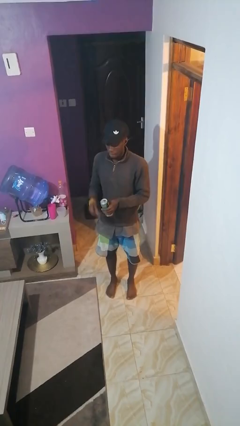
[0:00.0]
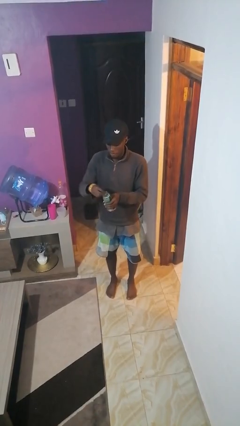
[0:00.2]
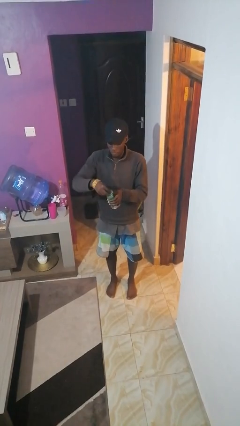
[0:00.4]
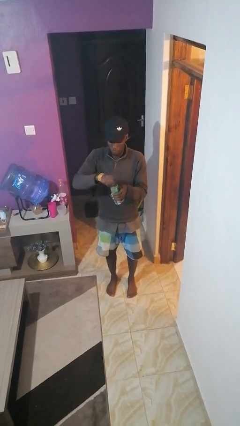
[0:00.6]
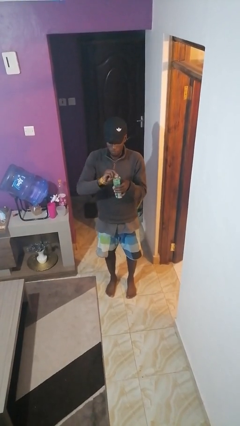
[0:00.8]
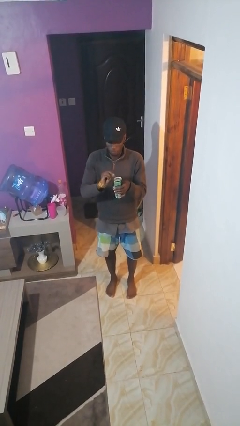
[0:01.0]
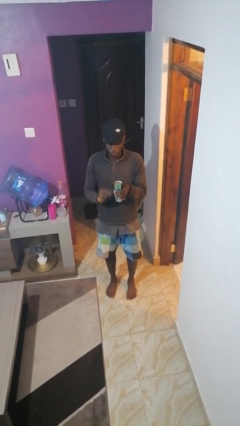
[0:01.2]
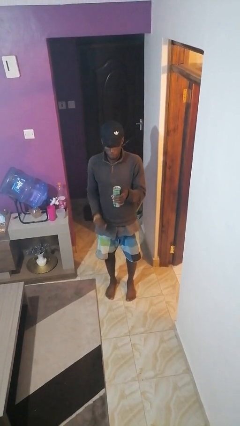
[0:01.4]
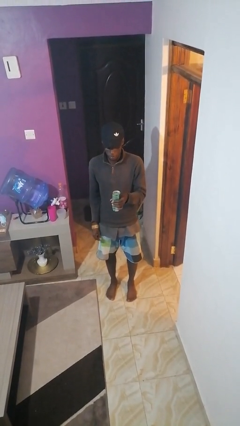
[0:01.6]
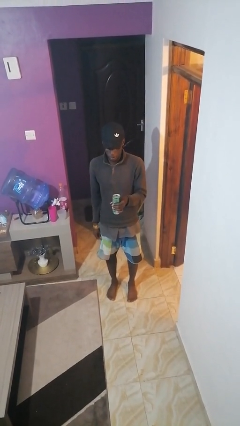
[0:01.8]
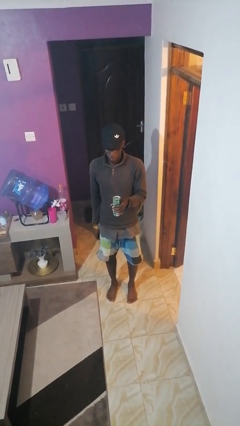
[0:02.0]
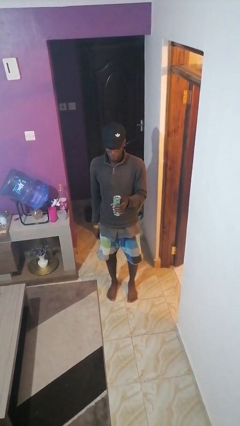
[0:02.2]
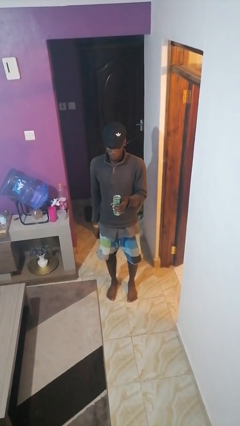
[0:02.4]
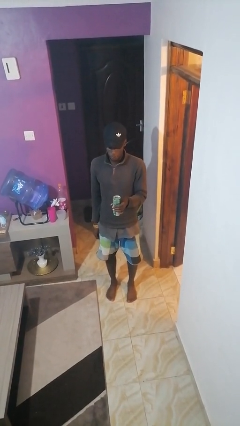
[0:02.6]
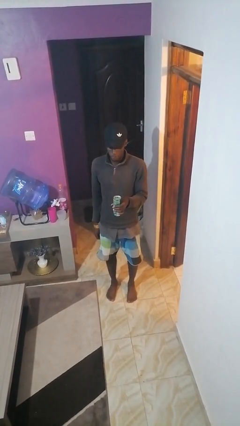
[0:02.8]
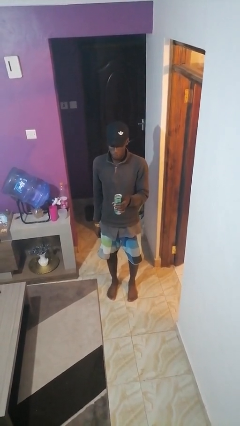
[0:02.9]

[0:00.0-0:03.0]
person opens beverage can

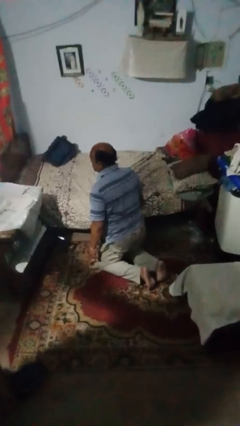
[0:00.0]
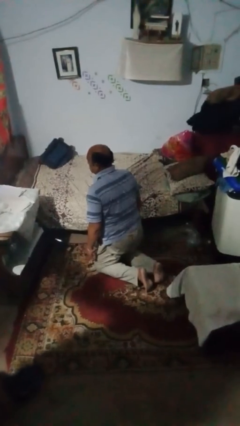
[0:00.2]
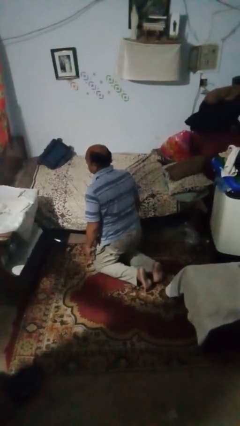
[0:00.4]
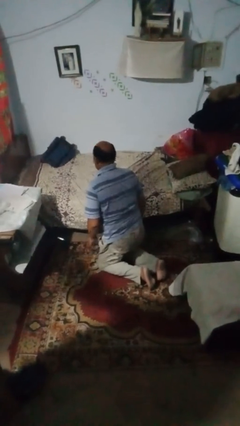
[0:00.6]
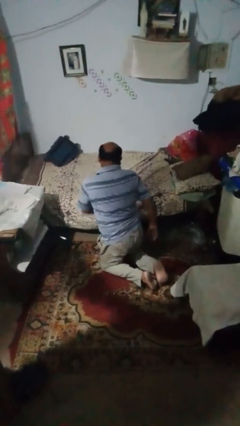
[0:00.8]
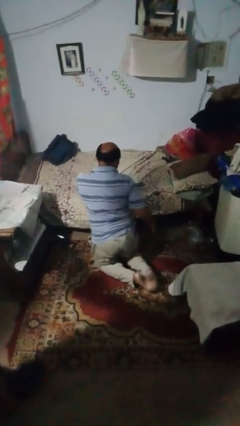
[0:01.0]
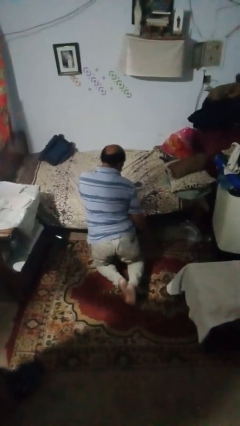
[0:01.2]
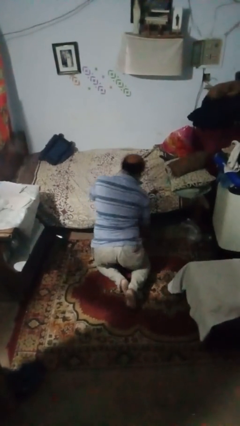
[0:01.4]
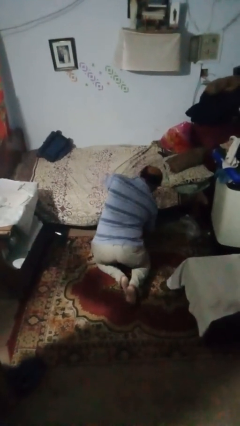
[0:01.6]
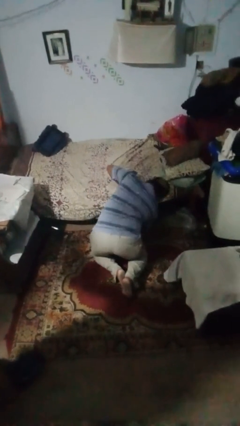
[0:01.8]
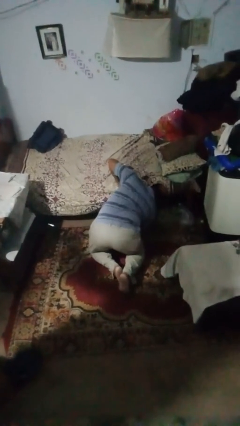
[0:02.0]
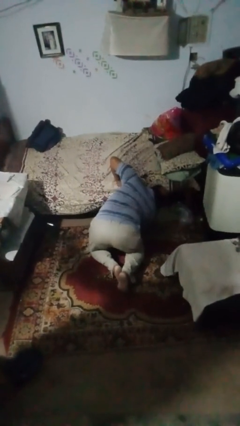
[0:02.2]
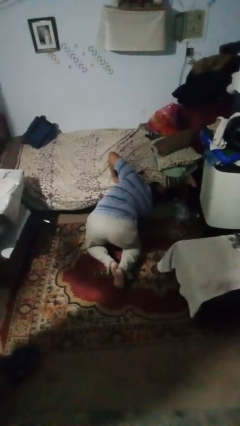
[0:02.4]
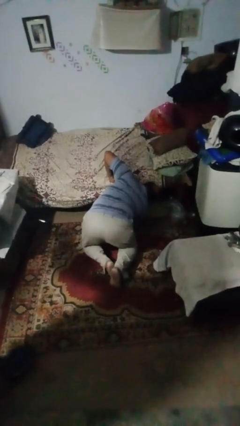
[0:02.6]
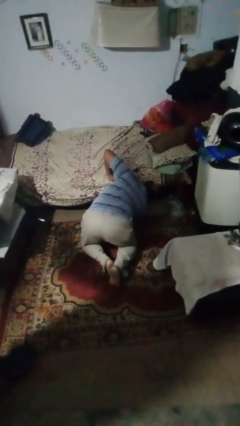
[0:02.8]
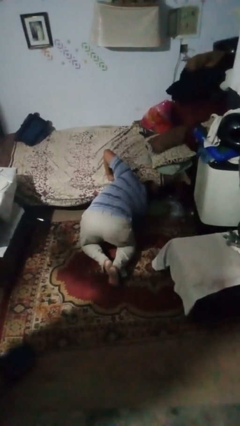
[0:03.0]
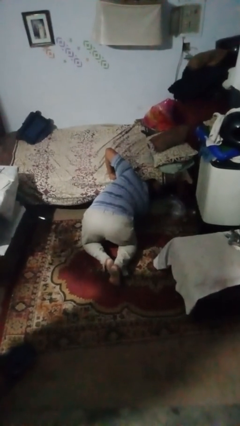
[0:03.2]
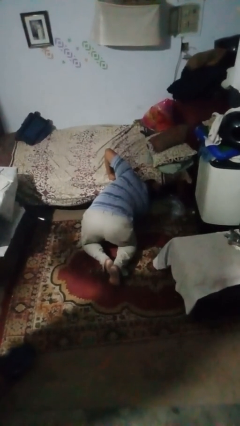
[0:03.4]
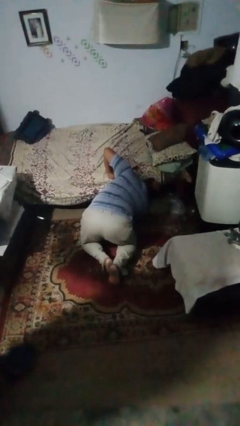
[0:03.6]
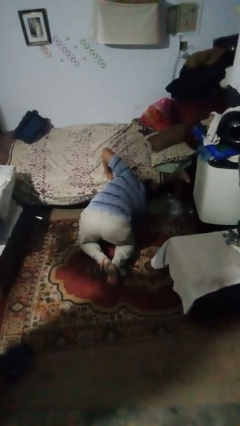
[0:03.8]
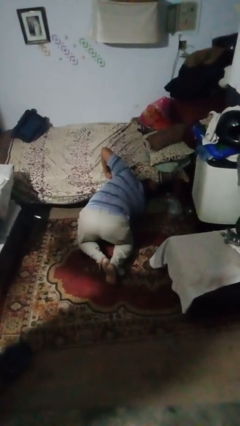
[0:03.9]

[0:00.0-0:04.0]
person searches under bed

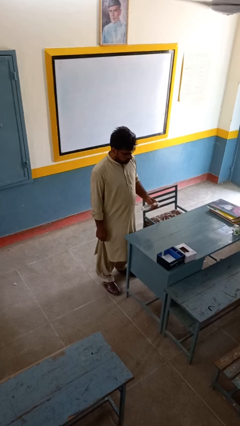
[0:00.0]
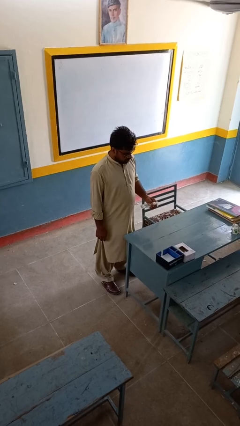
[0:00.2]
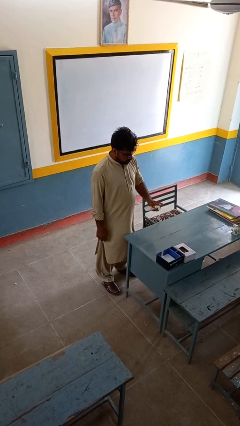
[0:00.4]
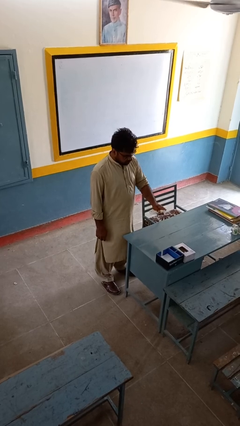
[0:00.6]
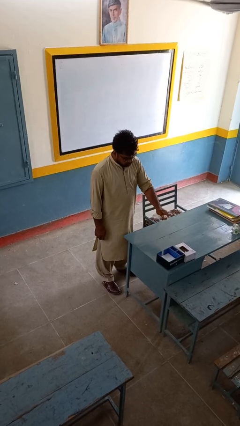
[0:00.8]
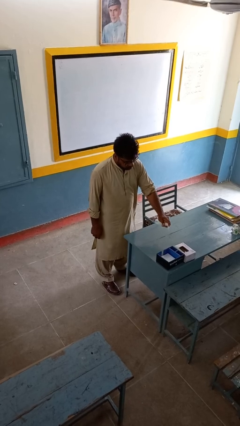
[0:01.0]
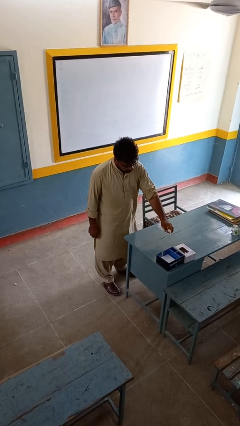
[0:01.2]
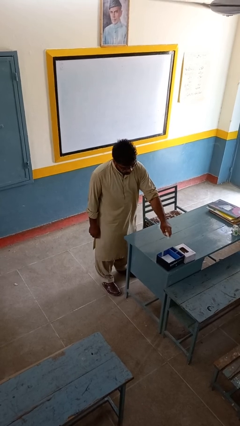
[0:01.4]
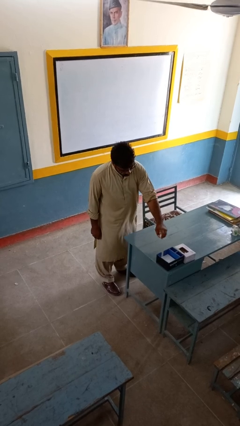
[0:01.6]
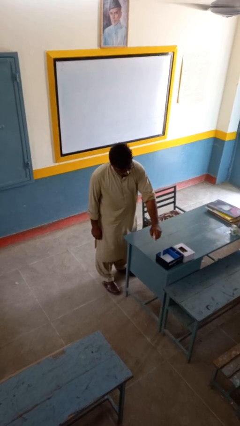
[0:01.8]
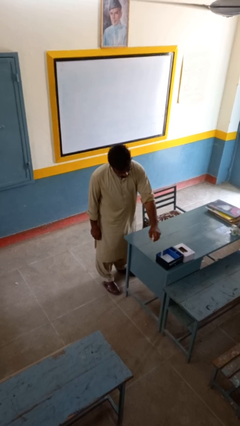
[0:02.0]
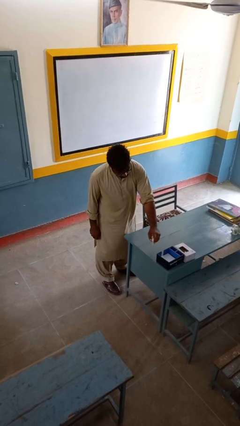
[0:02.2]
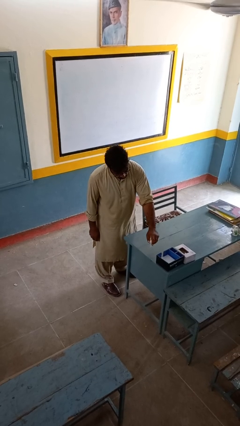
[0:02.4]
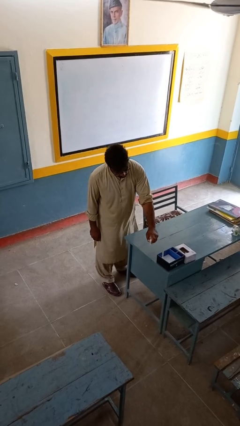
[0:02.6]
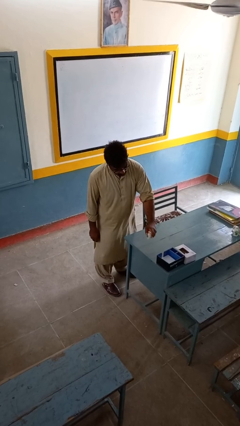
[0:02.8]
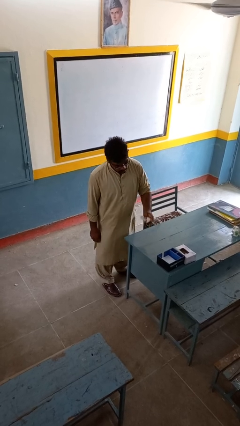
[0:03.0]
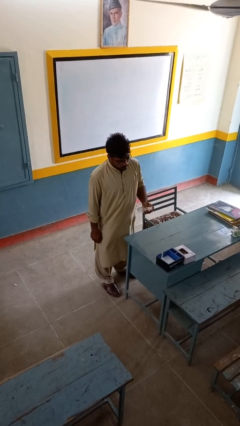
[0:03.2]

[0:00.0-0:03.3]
person sprays from bottle

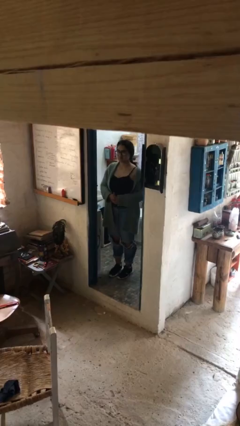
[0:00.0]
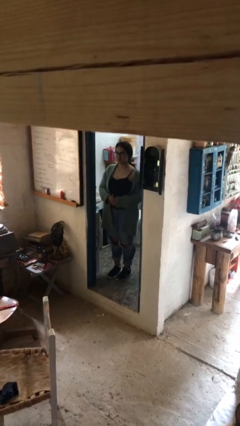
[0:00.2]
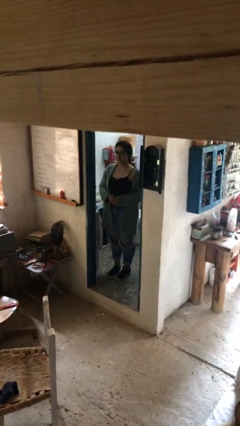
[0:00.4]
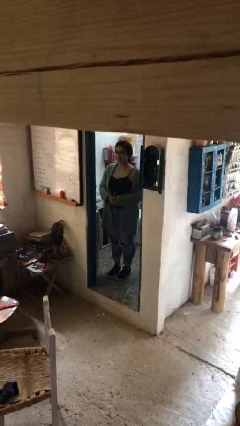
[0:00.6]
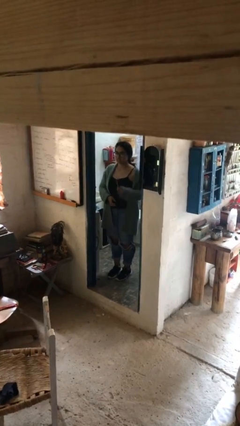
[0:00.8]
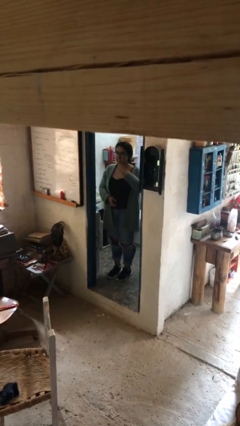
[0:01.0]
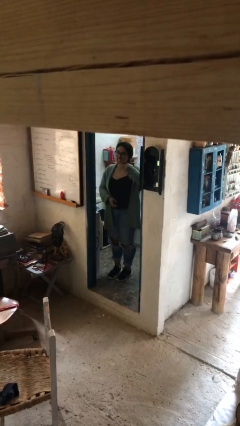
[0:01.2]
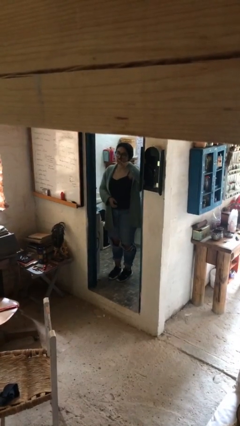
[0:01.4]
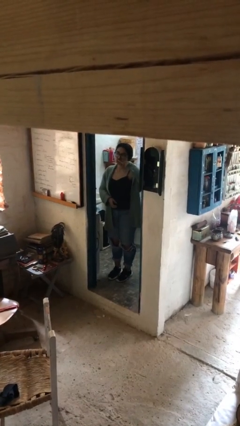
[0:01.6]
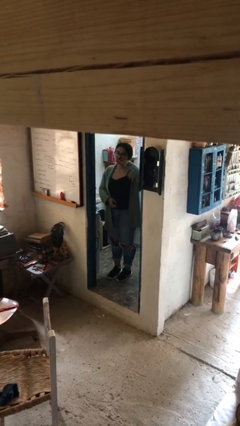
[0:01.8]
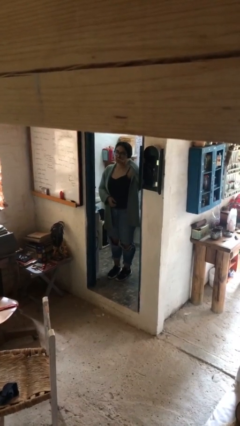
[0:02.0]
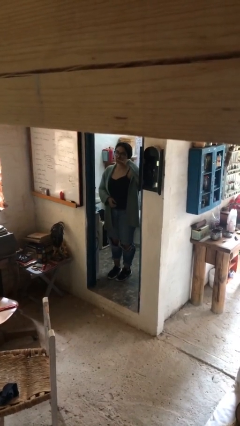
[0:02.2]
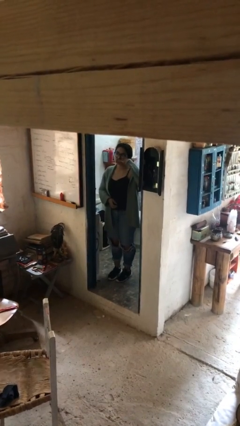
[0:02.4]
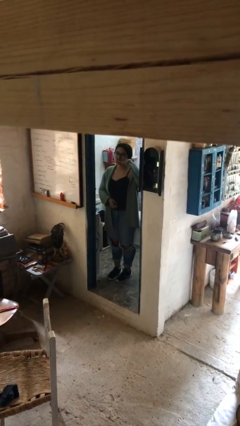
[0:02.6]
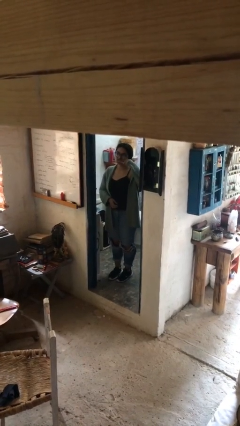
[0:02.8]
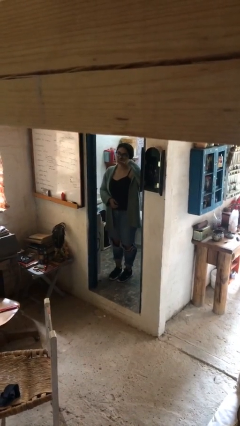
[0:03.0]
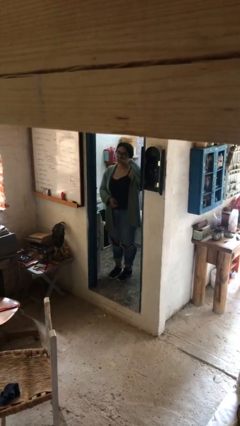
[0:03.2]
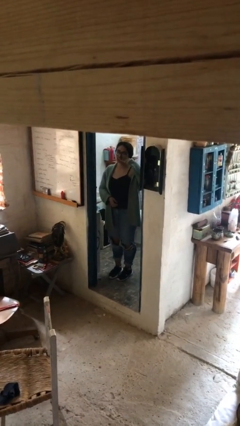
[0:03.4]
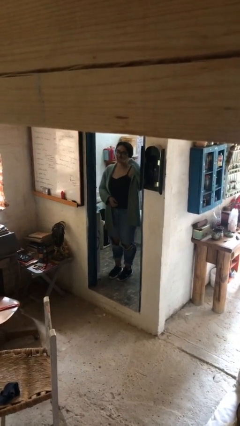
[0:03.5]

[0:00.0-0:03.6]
person brushes teeth

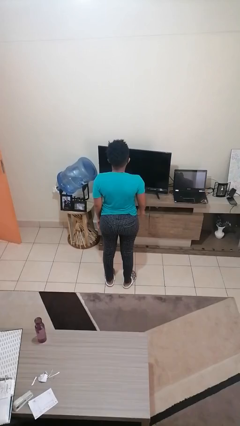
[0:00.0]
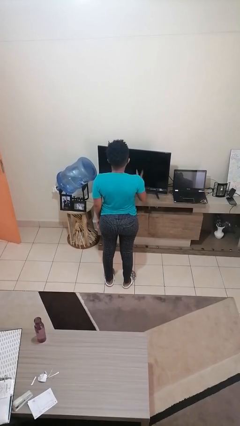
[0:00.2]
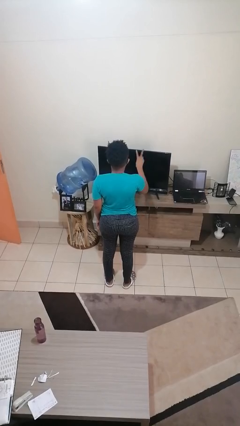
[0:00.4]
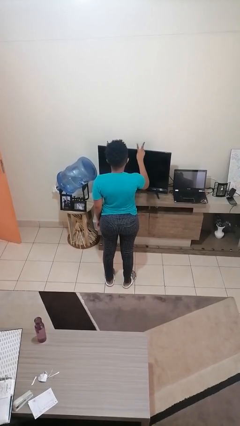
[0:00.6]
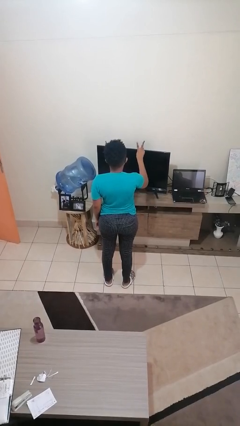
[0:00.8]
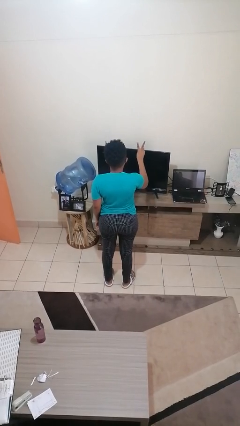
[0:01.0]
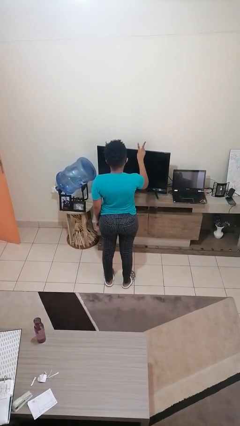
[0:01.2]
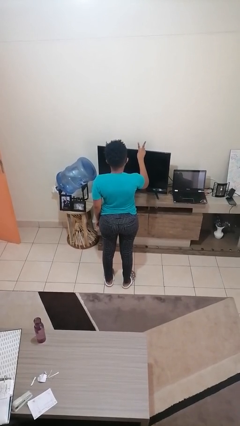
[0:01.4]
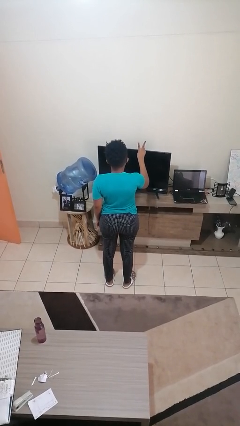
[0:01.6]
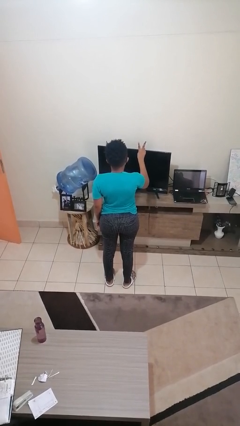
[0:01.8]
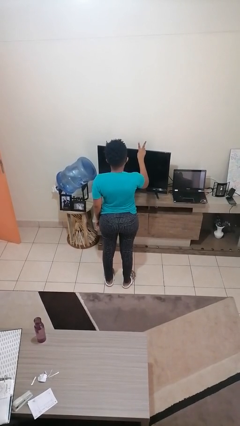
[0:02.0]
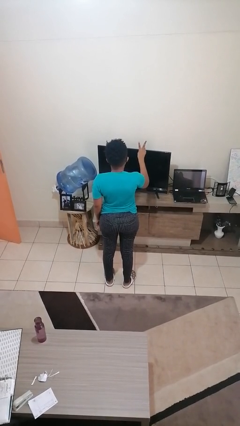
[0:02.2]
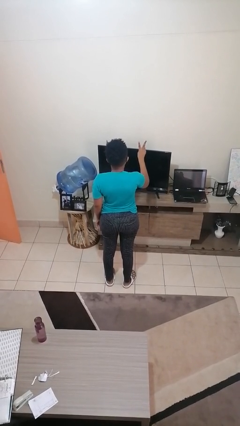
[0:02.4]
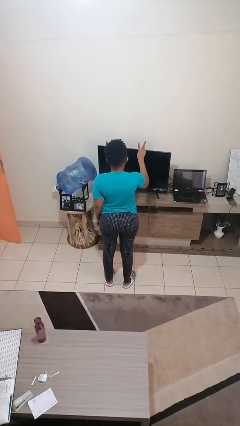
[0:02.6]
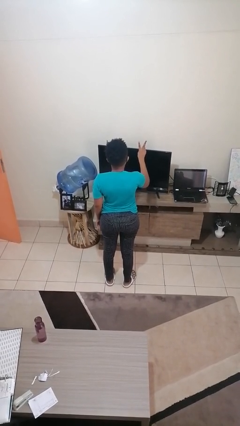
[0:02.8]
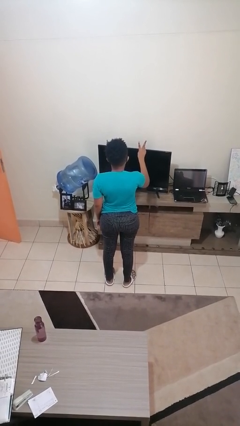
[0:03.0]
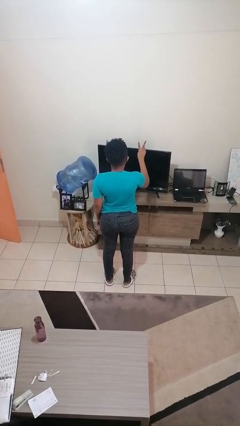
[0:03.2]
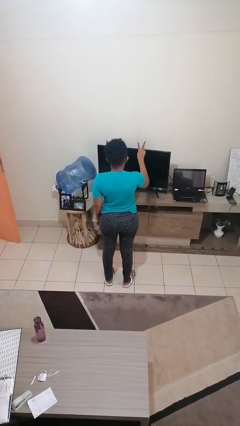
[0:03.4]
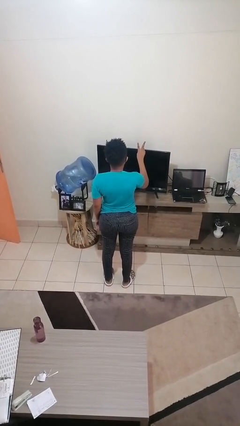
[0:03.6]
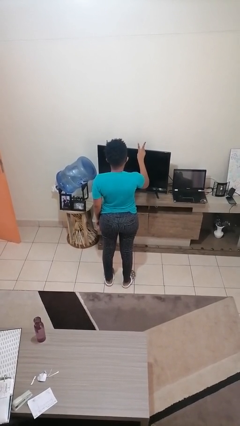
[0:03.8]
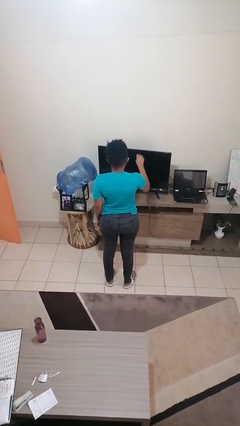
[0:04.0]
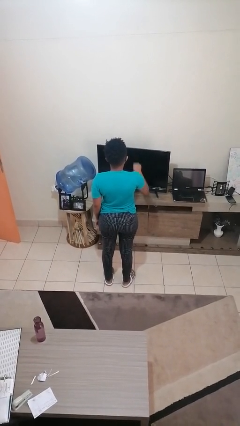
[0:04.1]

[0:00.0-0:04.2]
person gestures peace
